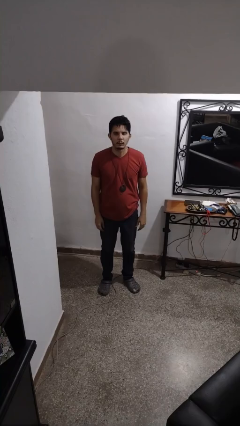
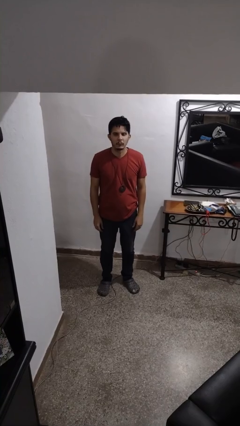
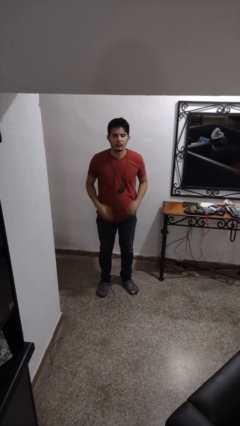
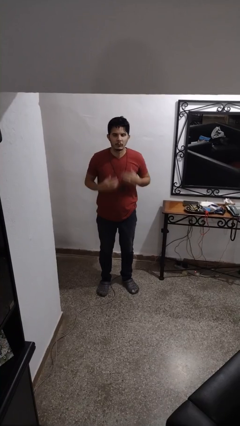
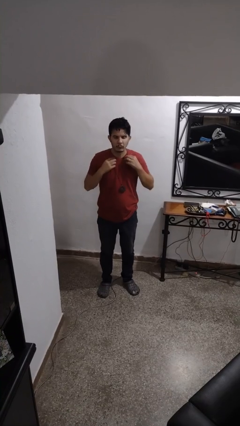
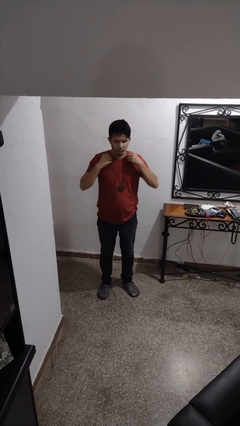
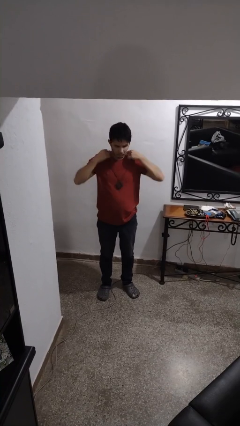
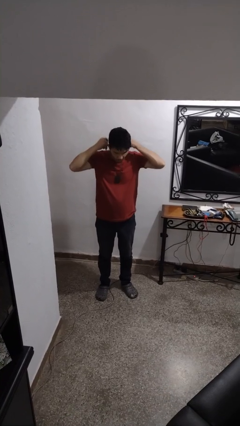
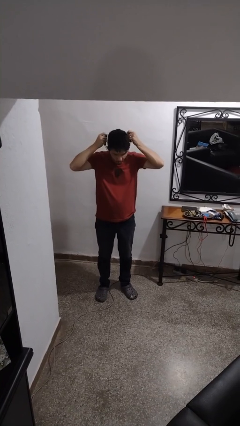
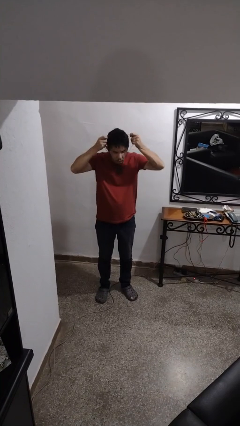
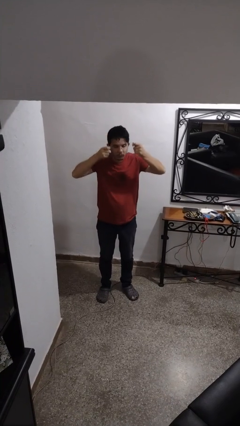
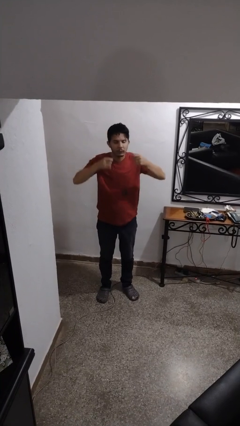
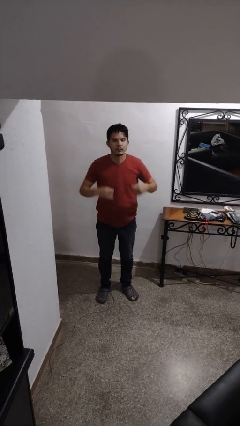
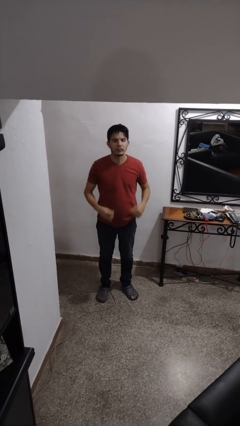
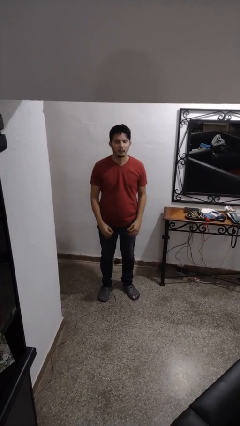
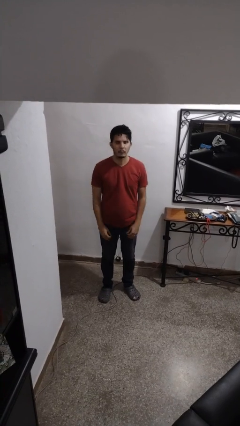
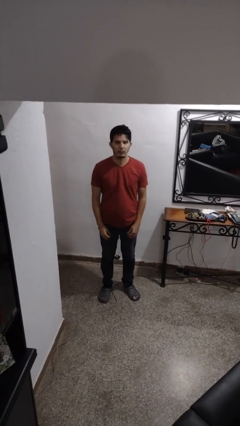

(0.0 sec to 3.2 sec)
person takes off necklace

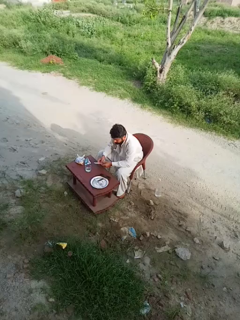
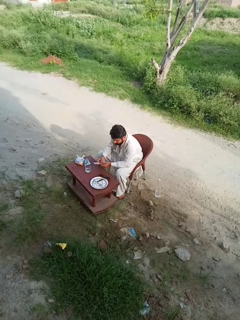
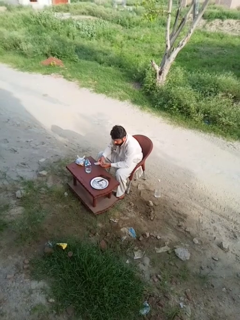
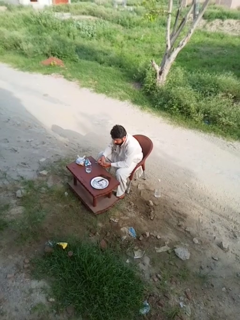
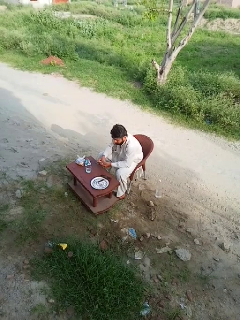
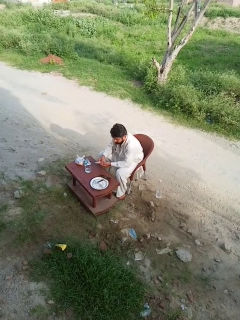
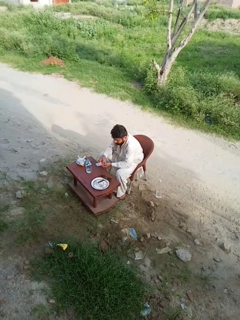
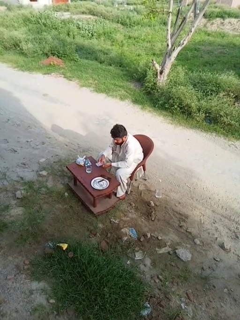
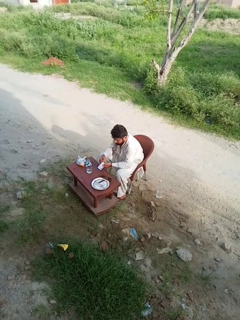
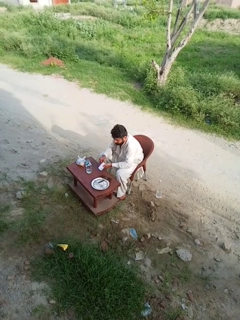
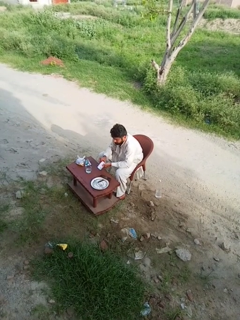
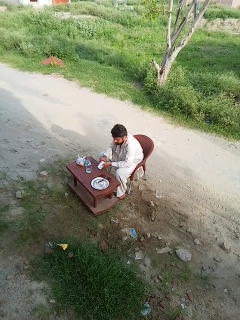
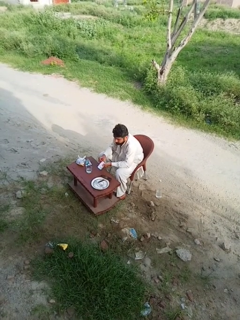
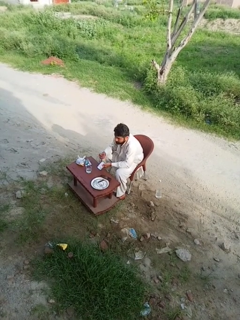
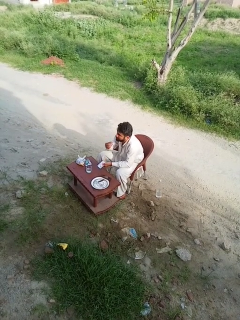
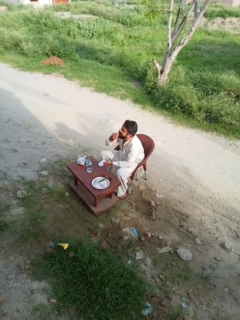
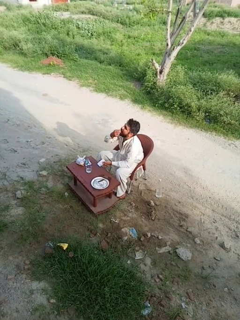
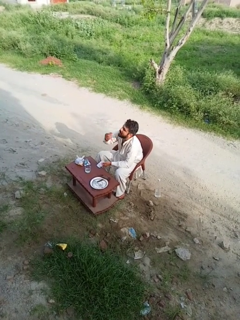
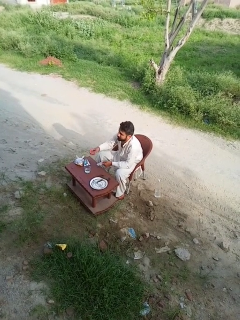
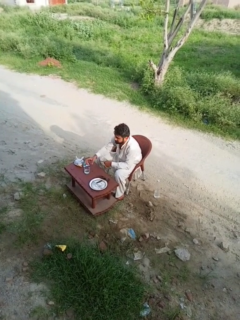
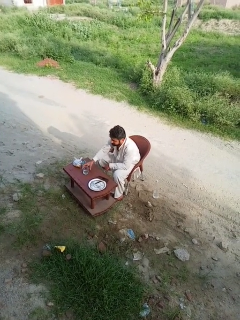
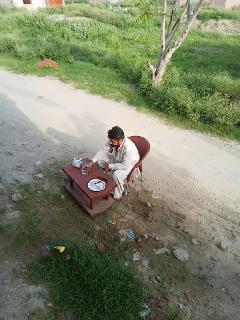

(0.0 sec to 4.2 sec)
person takes medicine pills

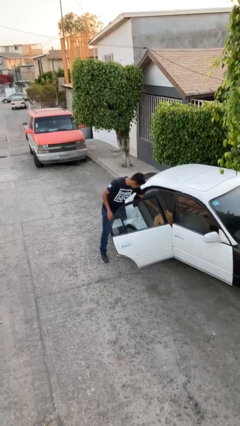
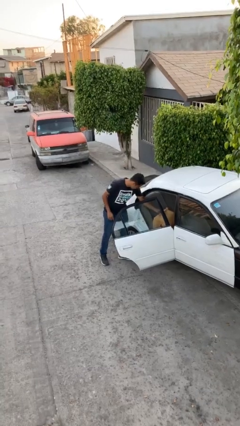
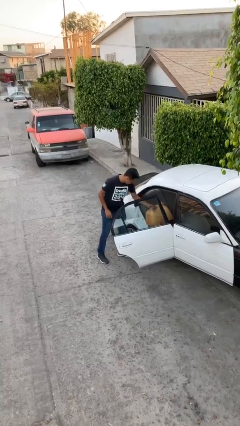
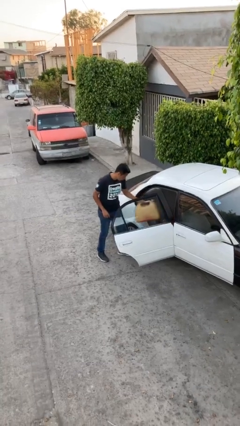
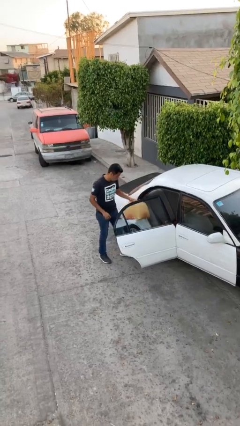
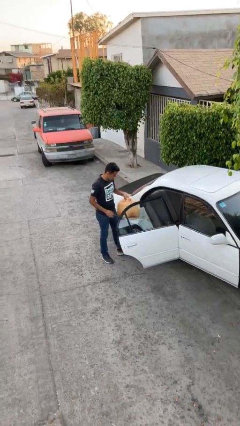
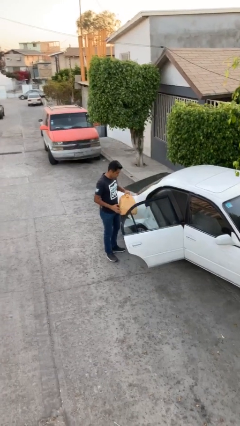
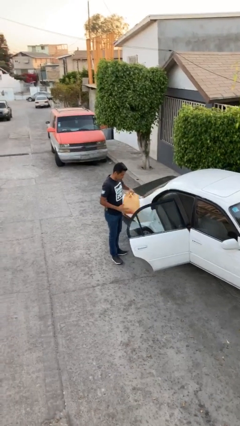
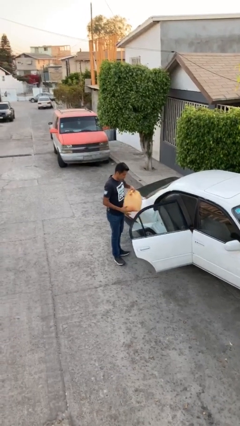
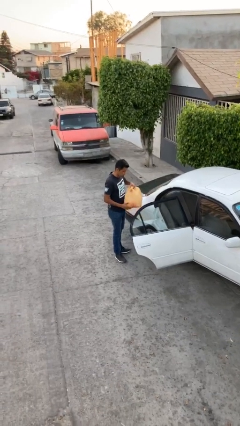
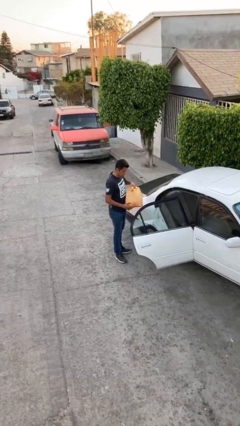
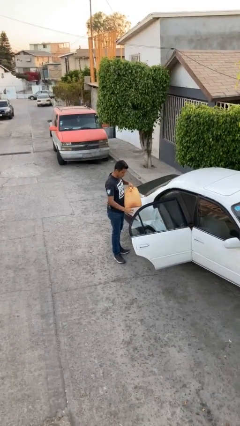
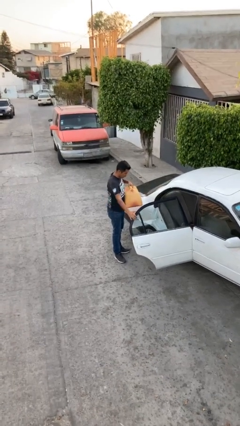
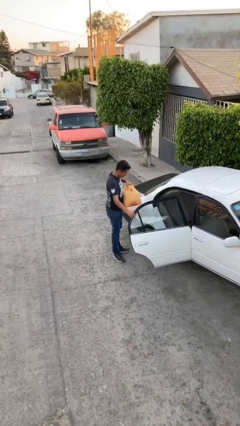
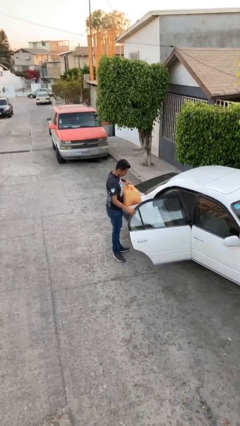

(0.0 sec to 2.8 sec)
person unloads car

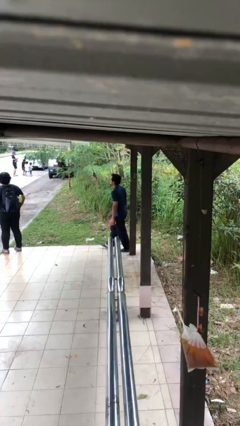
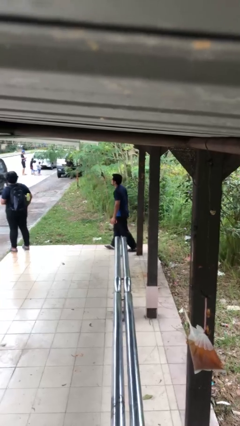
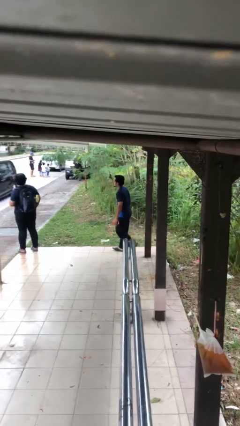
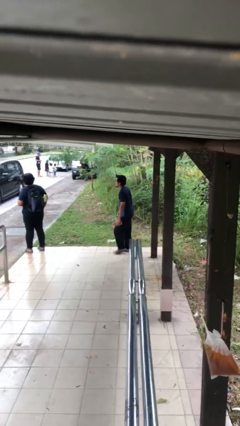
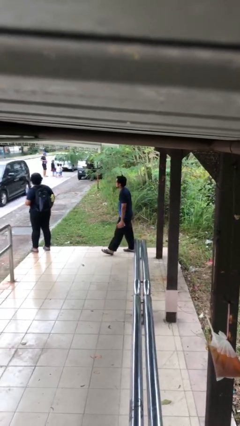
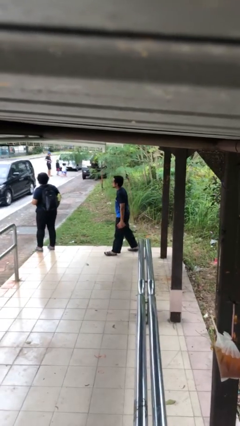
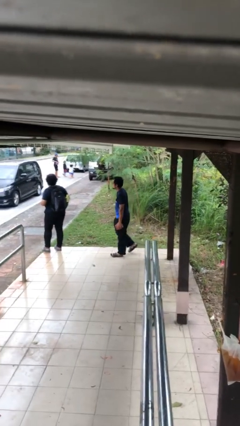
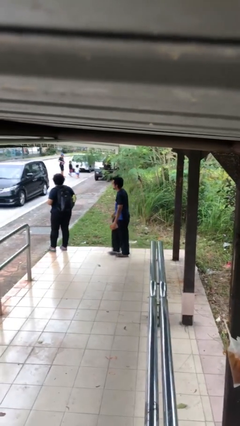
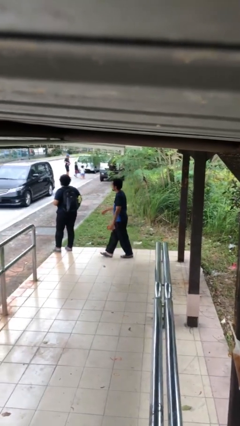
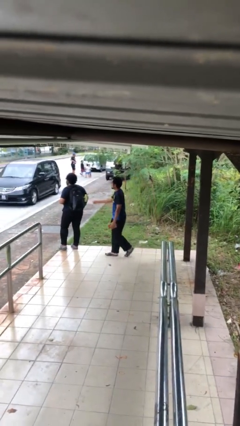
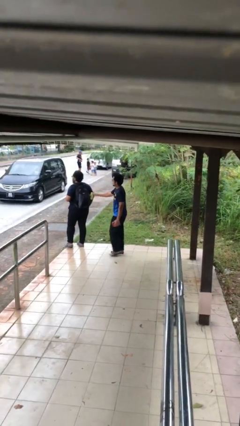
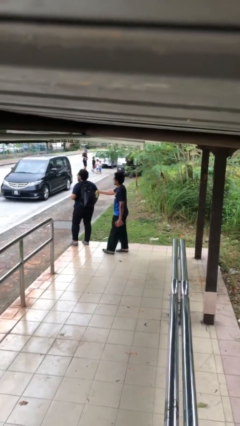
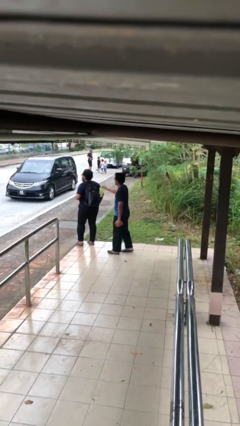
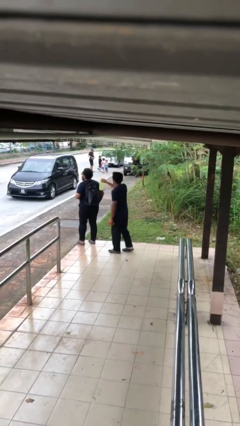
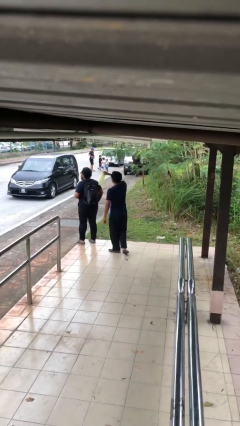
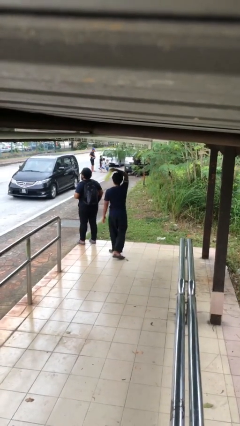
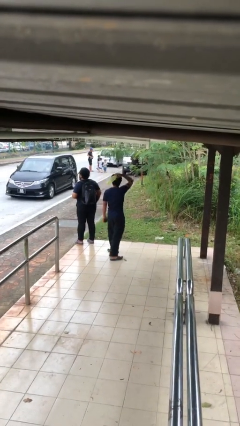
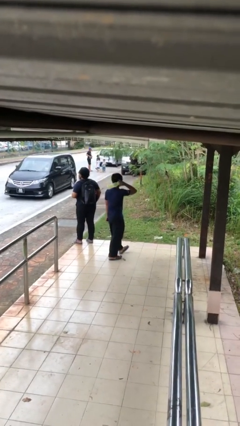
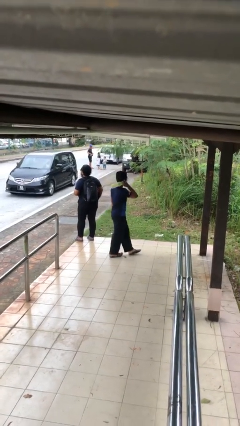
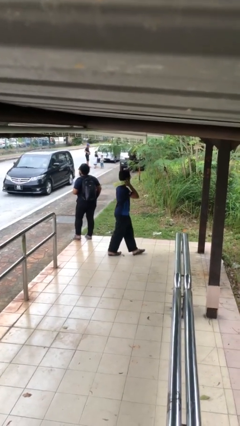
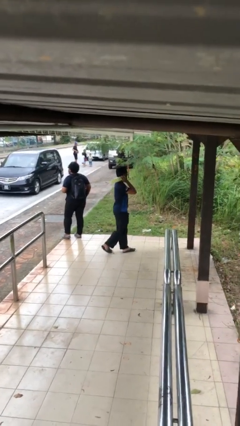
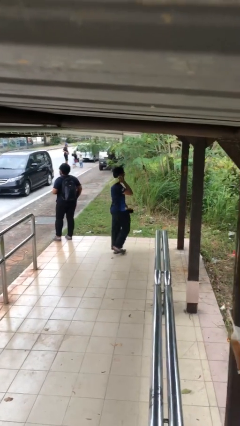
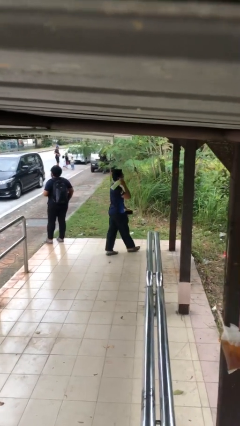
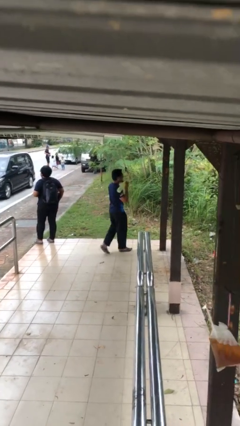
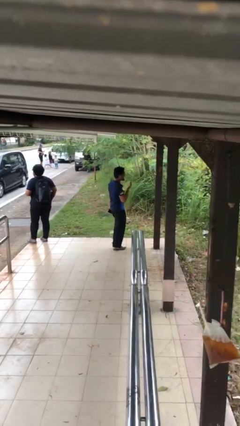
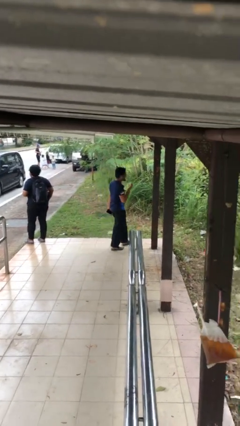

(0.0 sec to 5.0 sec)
person steals object from person

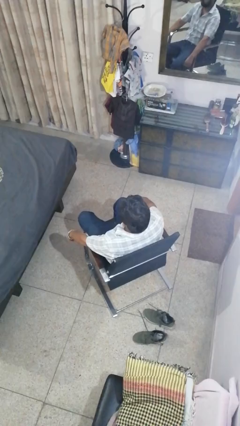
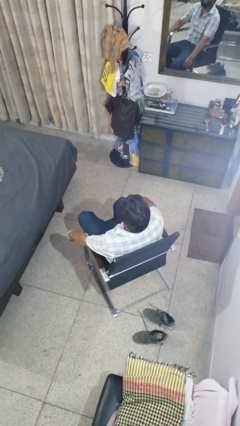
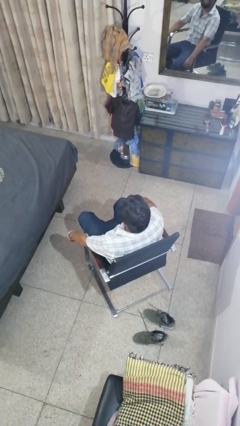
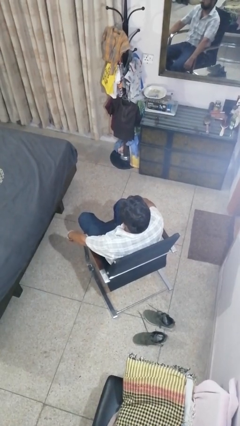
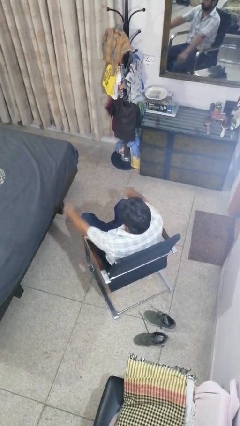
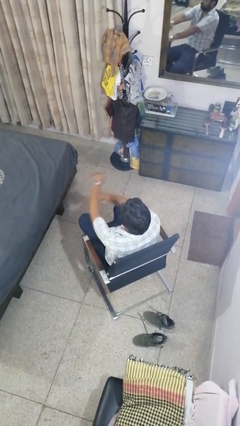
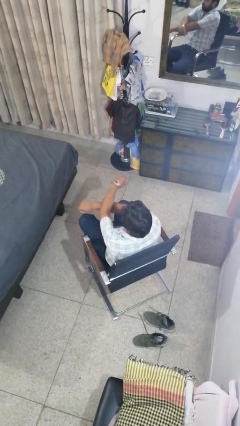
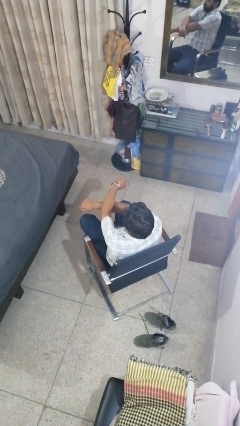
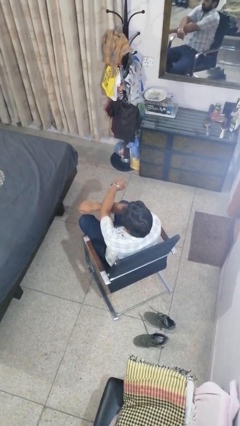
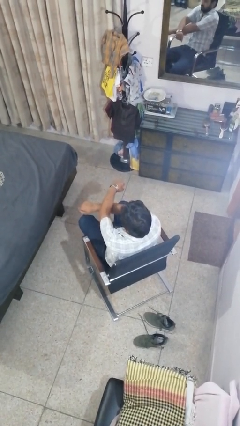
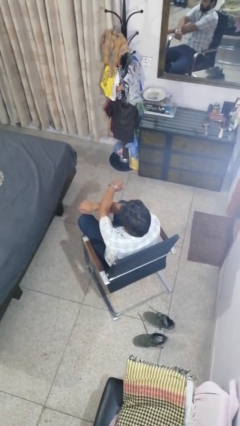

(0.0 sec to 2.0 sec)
person gestures arms x

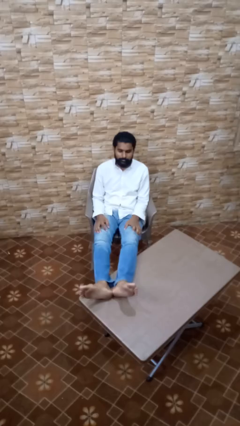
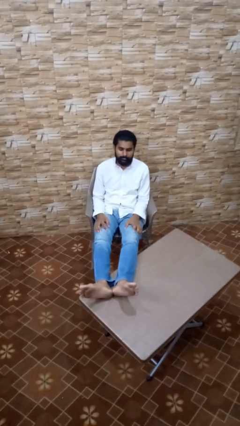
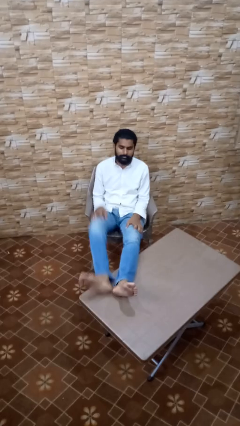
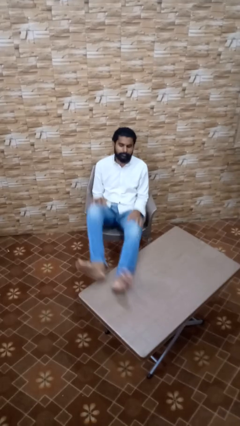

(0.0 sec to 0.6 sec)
person puts feet up

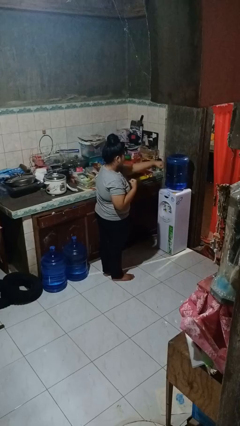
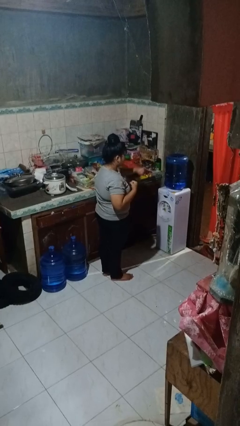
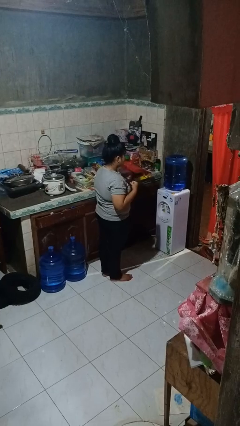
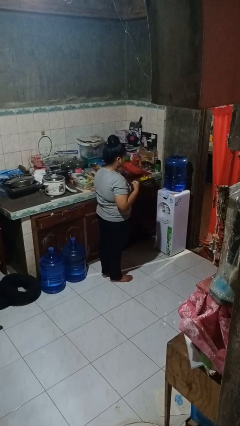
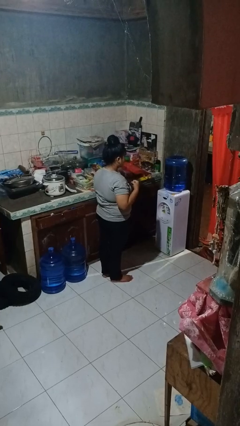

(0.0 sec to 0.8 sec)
person punches
